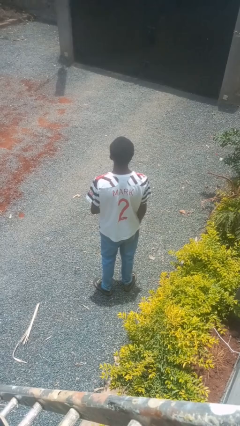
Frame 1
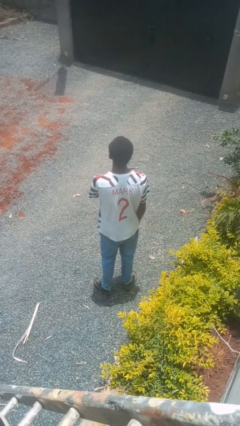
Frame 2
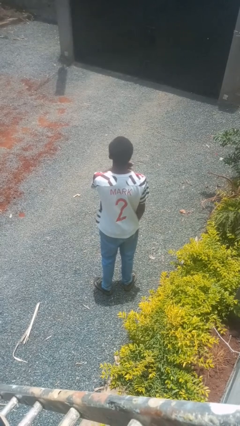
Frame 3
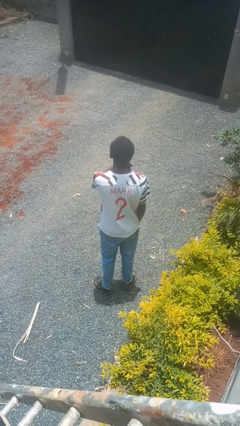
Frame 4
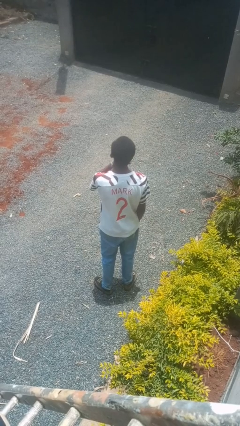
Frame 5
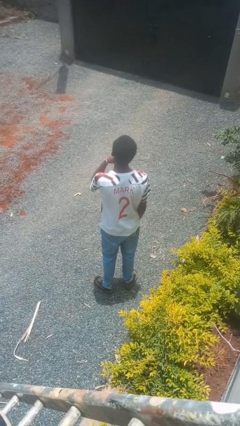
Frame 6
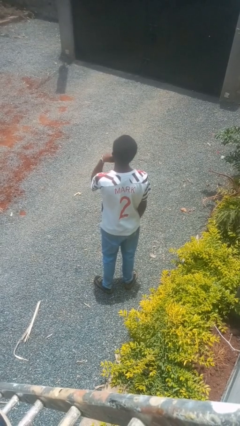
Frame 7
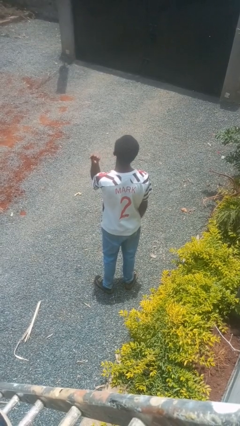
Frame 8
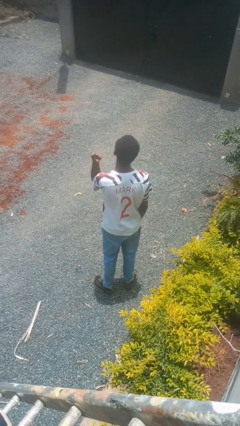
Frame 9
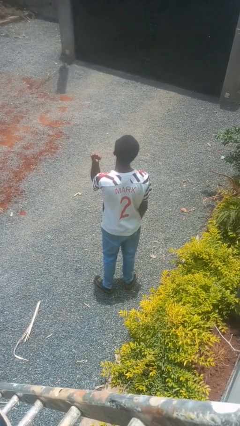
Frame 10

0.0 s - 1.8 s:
person gestures cut

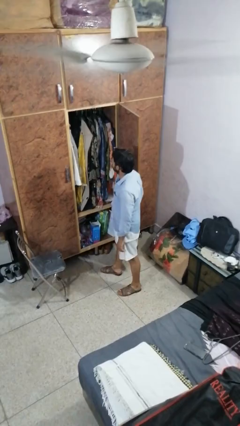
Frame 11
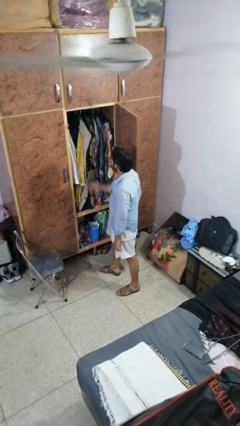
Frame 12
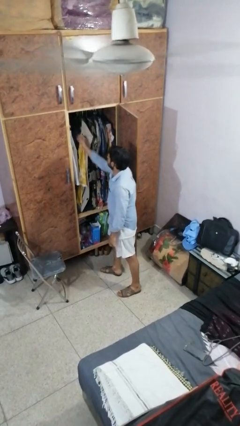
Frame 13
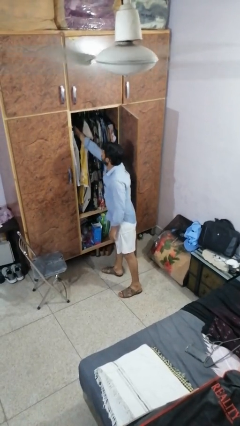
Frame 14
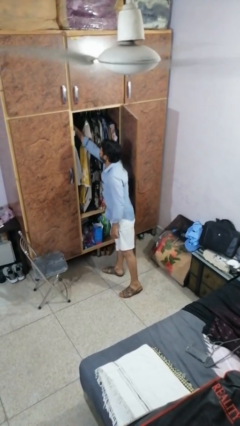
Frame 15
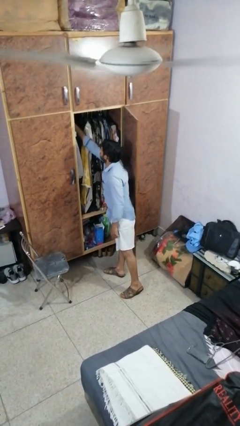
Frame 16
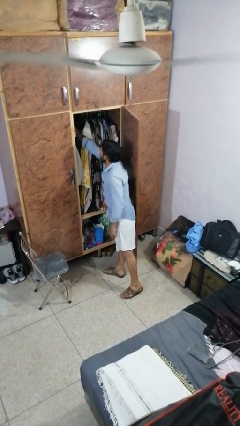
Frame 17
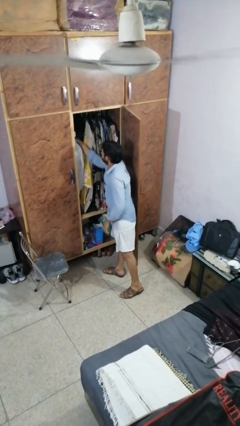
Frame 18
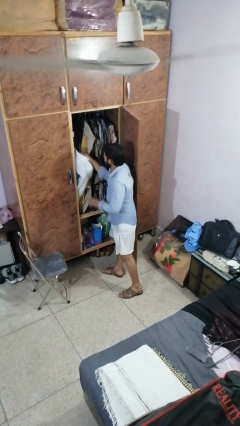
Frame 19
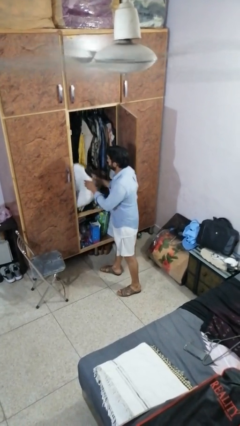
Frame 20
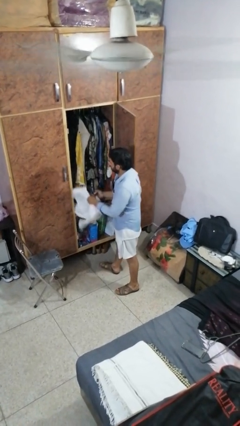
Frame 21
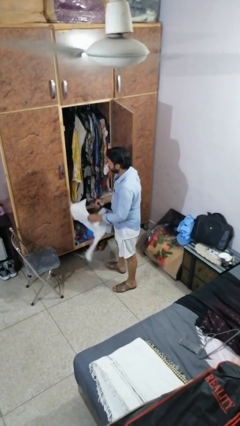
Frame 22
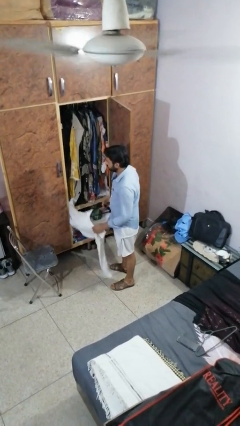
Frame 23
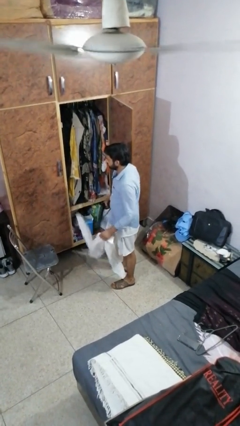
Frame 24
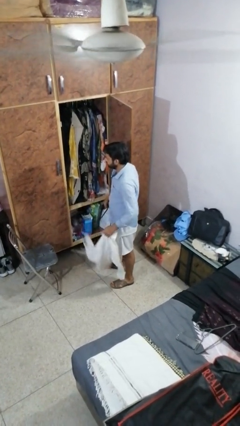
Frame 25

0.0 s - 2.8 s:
person takes clothes from closet

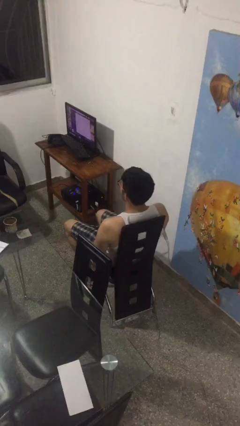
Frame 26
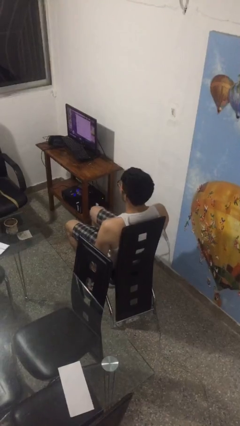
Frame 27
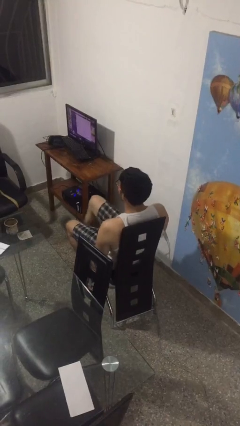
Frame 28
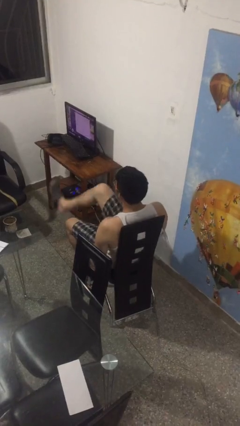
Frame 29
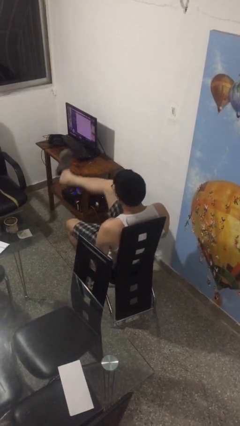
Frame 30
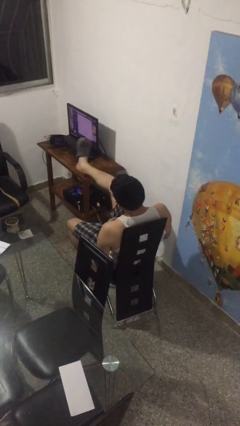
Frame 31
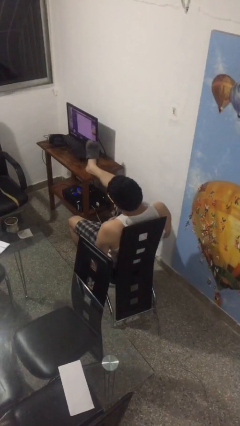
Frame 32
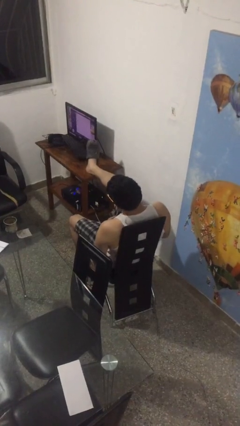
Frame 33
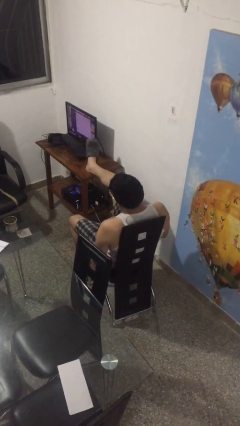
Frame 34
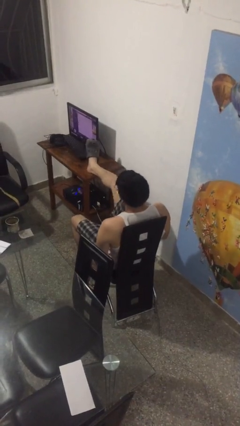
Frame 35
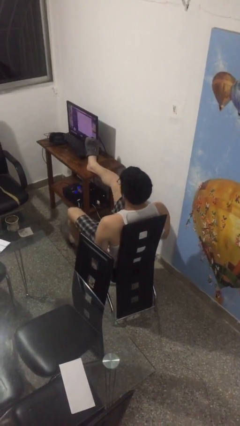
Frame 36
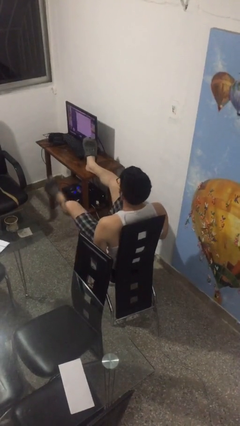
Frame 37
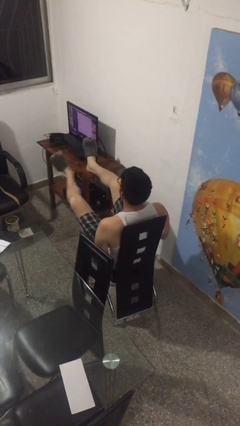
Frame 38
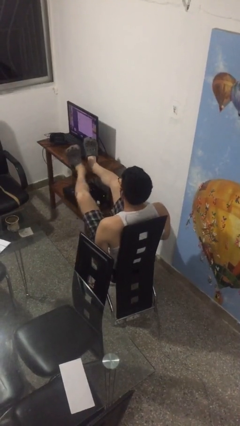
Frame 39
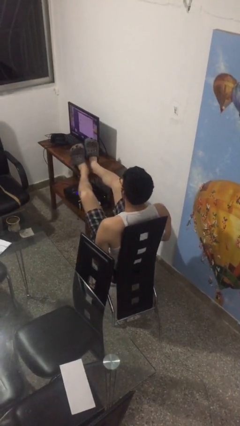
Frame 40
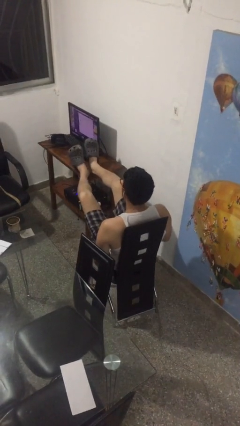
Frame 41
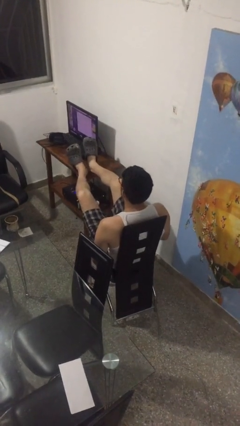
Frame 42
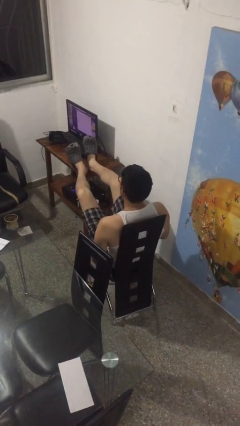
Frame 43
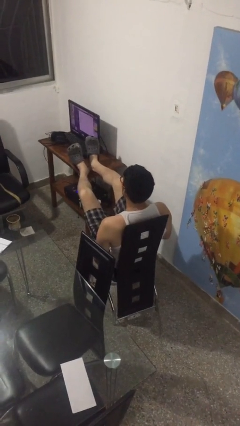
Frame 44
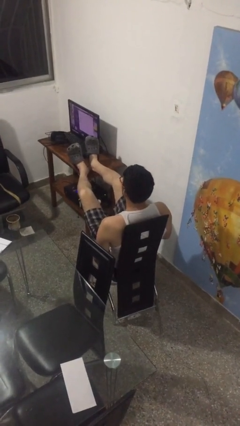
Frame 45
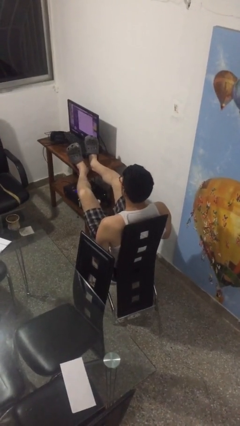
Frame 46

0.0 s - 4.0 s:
person puts feet up

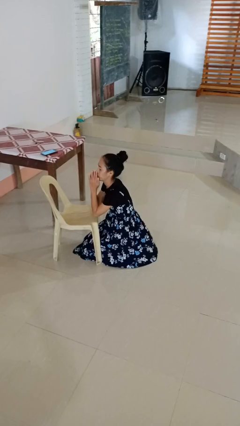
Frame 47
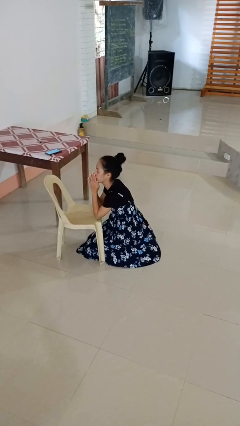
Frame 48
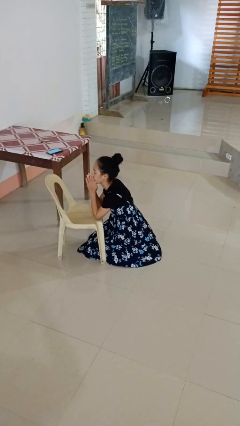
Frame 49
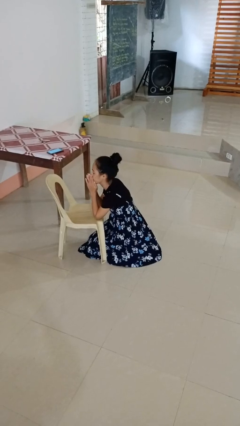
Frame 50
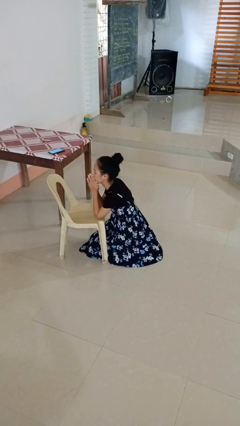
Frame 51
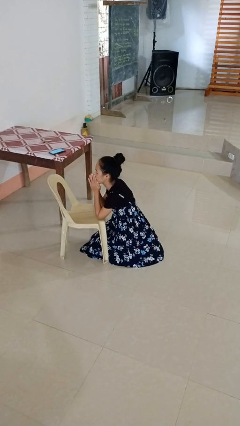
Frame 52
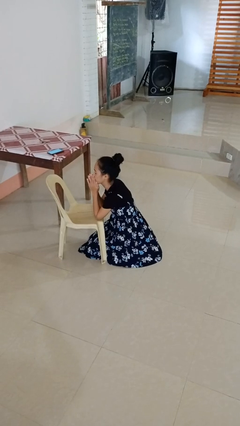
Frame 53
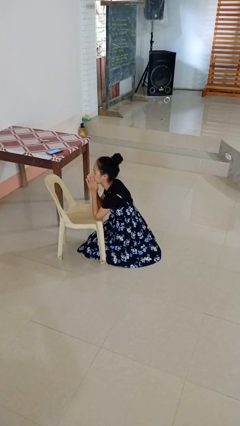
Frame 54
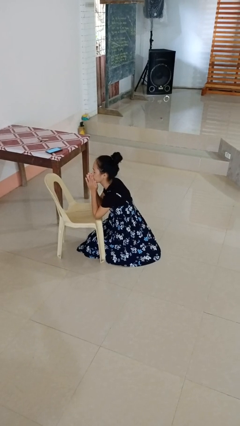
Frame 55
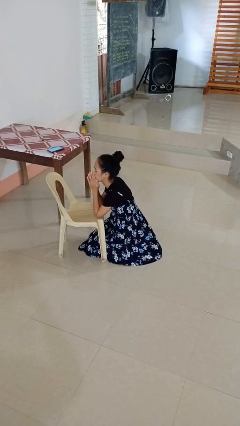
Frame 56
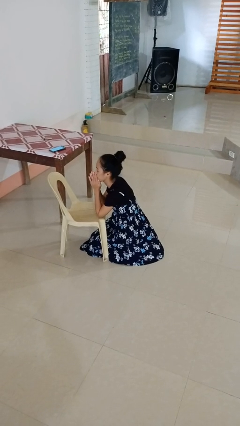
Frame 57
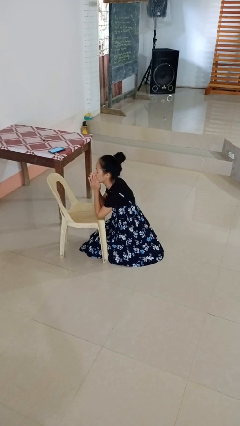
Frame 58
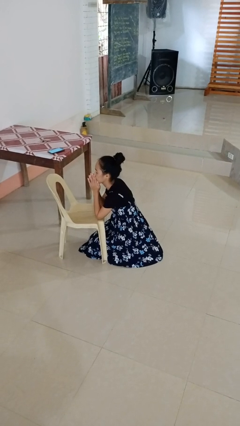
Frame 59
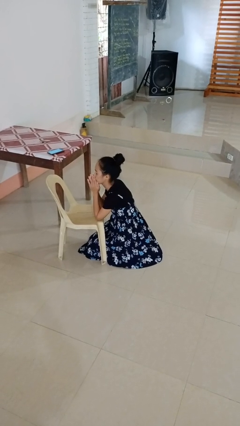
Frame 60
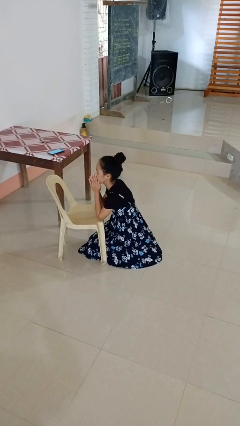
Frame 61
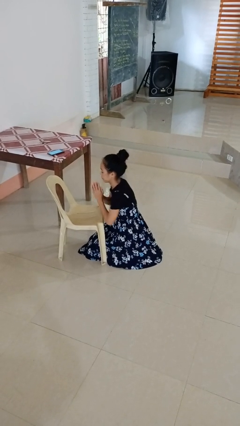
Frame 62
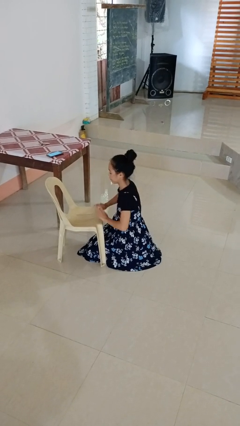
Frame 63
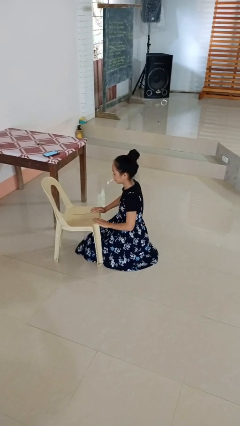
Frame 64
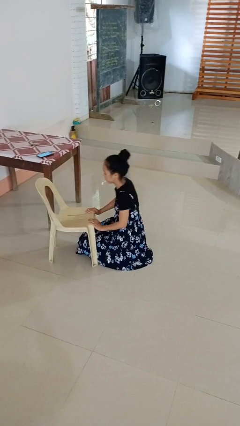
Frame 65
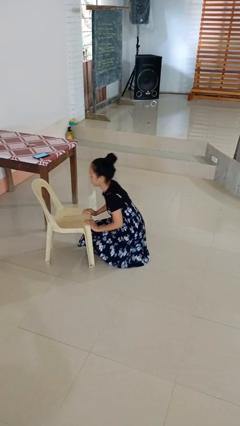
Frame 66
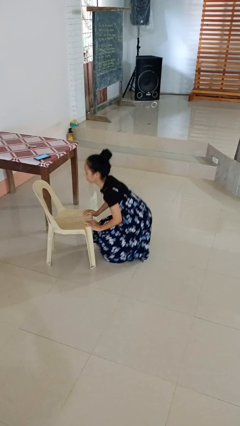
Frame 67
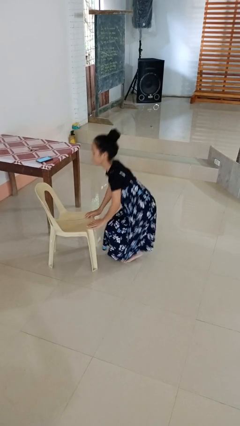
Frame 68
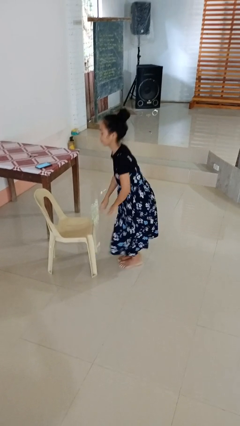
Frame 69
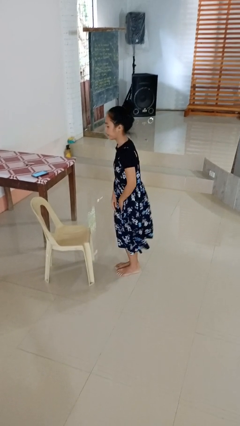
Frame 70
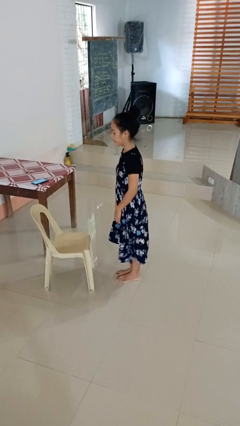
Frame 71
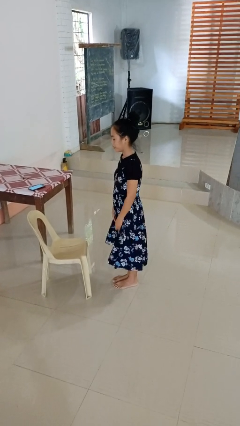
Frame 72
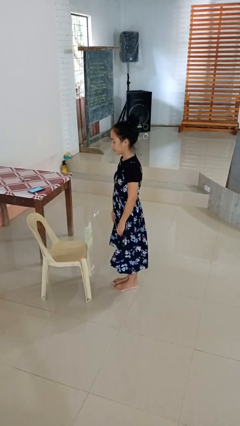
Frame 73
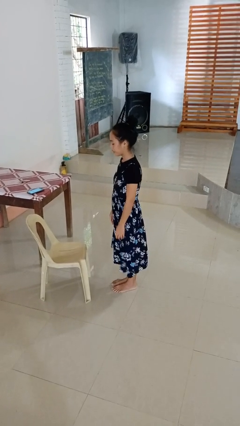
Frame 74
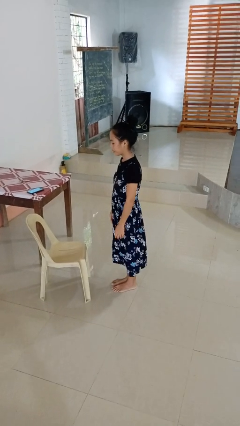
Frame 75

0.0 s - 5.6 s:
person prays

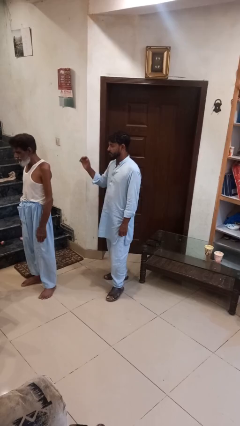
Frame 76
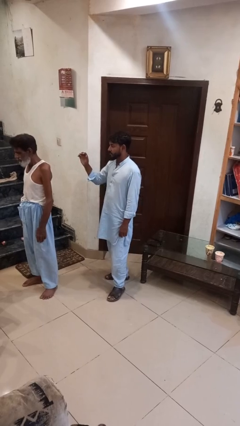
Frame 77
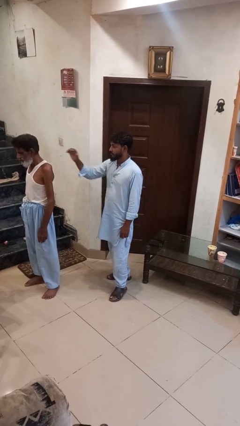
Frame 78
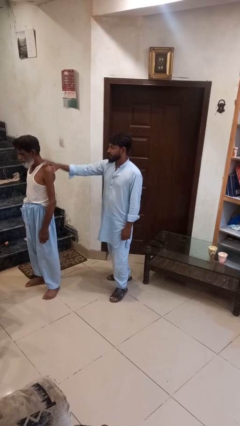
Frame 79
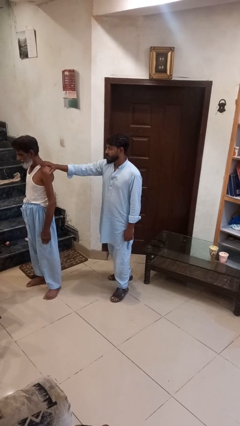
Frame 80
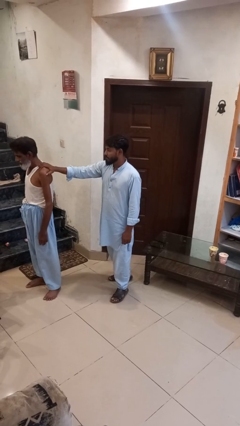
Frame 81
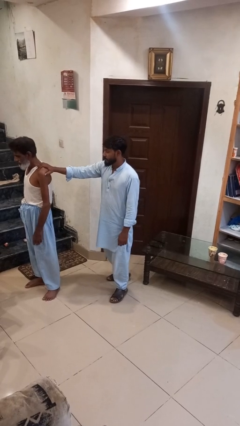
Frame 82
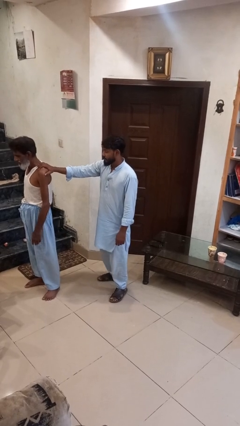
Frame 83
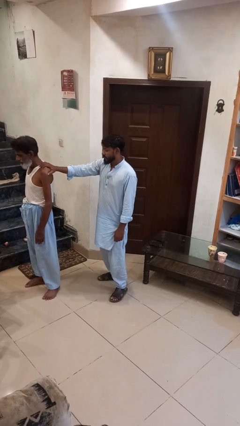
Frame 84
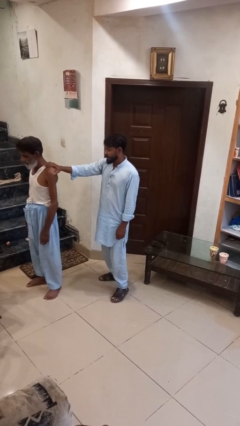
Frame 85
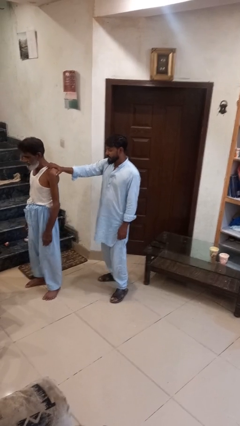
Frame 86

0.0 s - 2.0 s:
person grabs person by shoulder

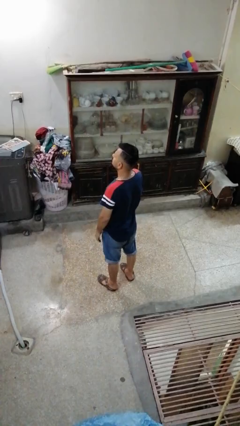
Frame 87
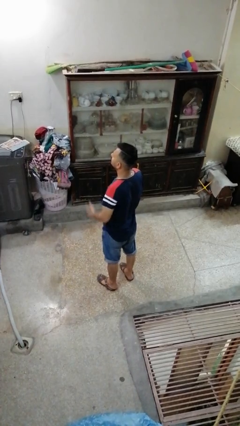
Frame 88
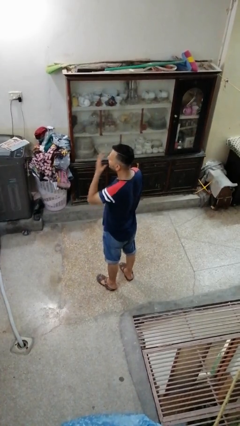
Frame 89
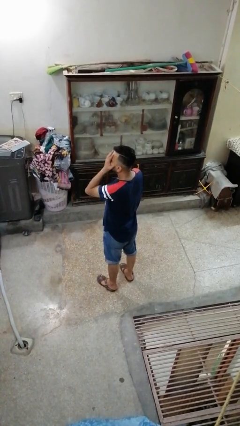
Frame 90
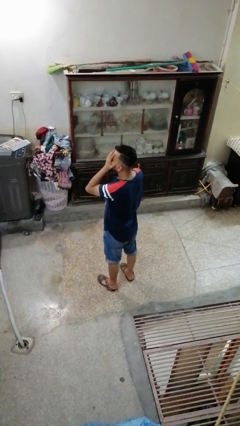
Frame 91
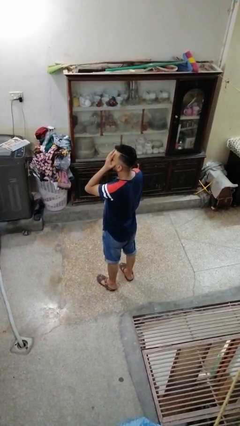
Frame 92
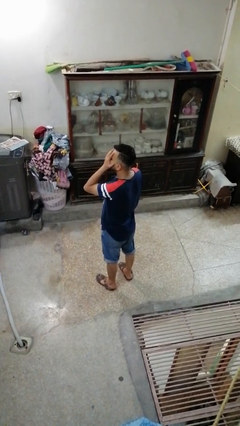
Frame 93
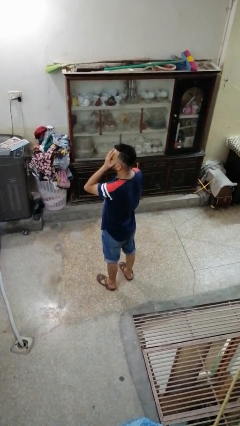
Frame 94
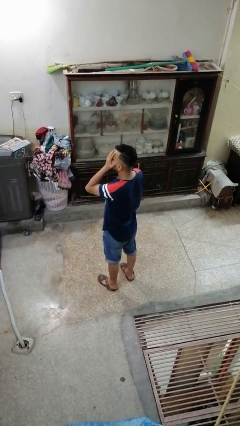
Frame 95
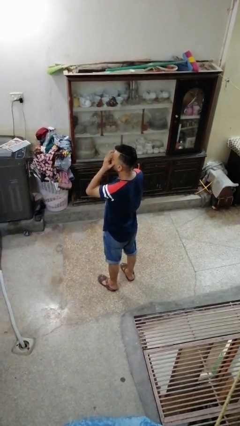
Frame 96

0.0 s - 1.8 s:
person covers face with hands
